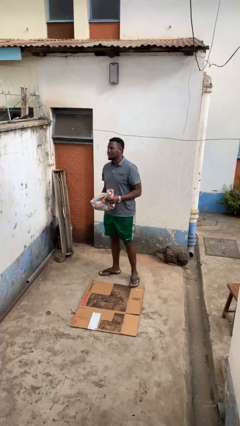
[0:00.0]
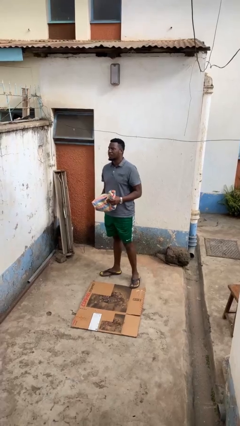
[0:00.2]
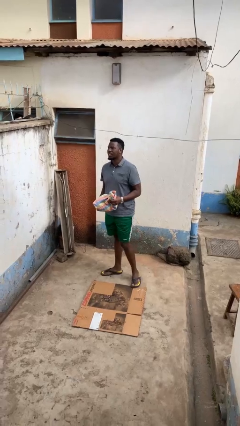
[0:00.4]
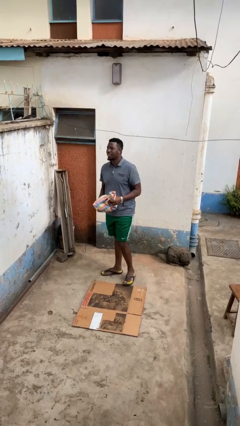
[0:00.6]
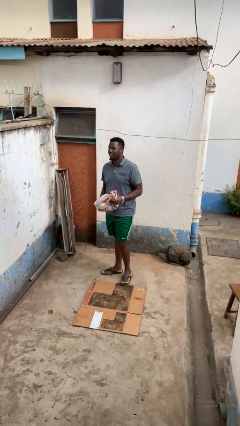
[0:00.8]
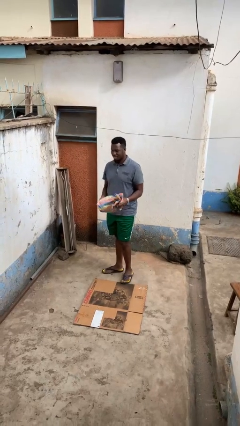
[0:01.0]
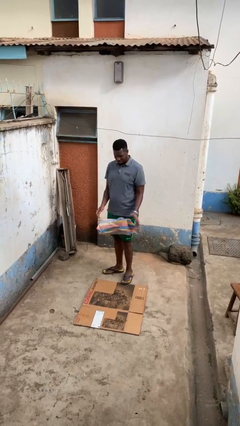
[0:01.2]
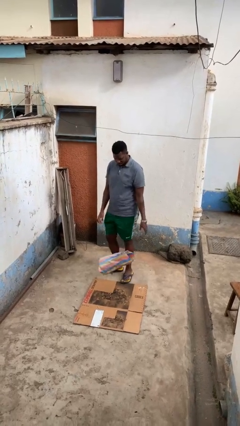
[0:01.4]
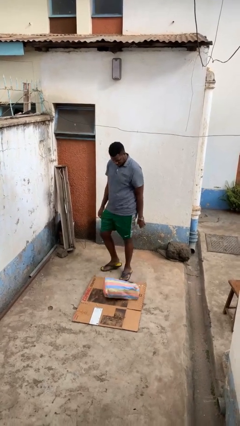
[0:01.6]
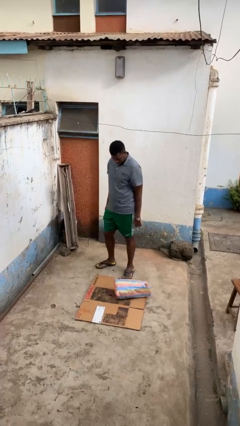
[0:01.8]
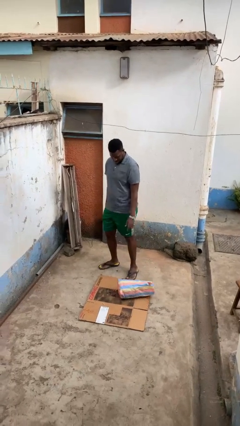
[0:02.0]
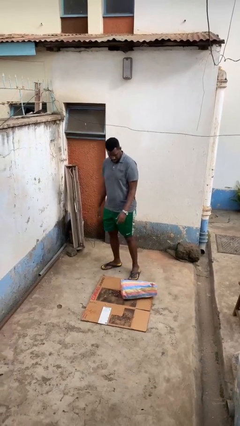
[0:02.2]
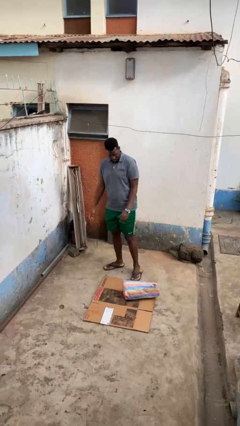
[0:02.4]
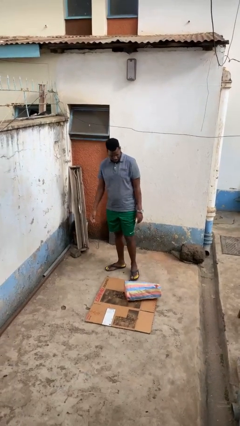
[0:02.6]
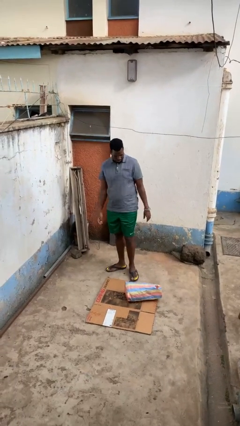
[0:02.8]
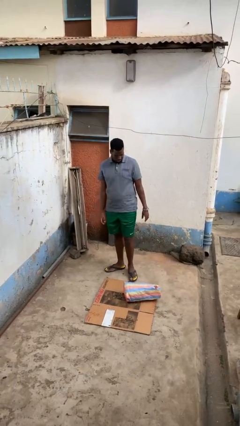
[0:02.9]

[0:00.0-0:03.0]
person drops object

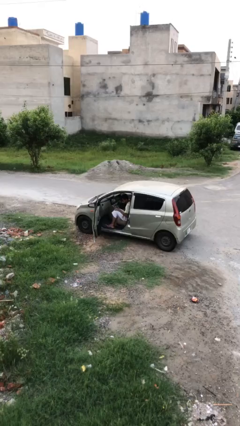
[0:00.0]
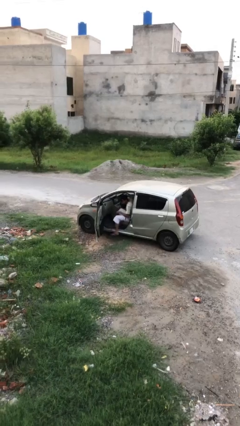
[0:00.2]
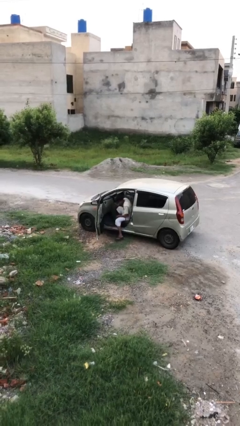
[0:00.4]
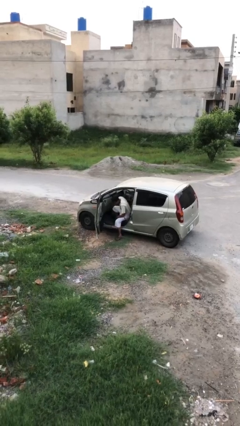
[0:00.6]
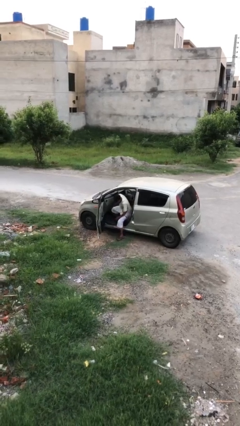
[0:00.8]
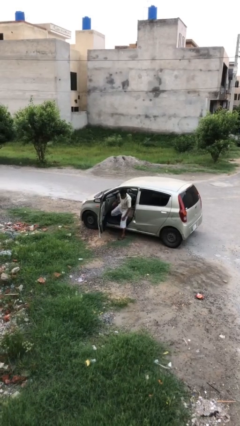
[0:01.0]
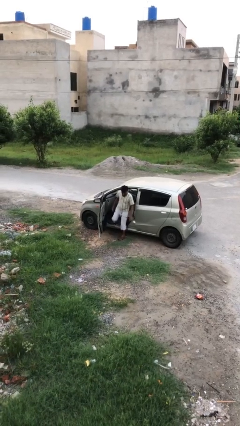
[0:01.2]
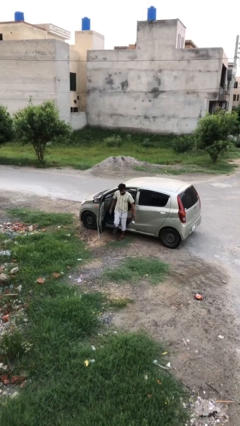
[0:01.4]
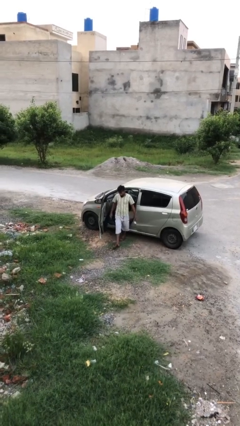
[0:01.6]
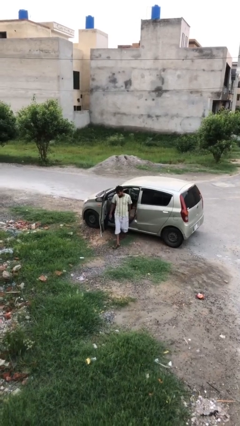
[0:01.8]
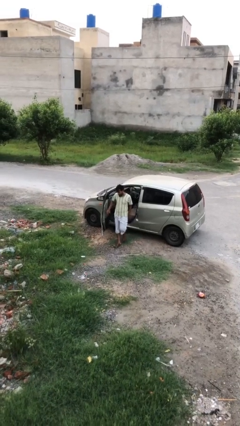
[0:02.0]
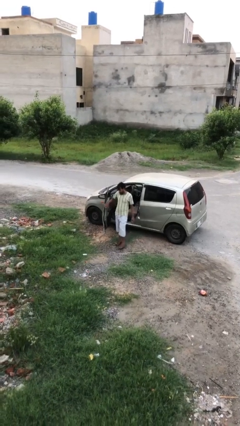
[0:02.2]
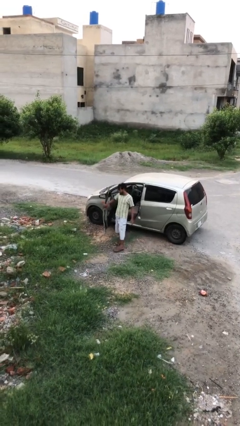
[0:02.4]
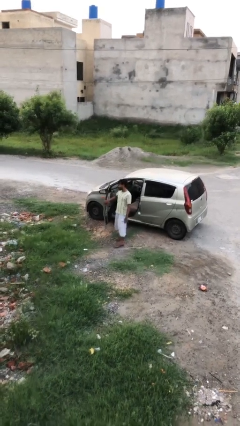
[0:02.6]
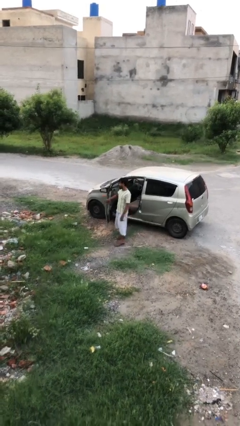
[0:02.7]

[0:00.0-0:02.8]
person exits car

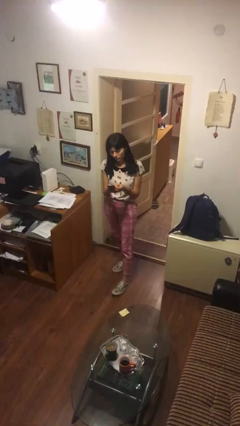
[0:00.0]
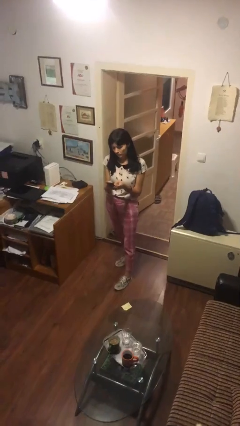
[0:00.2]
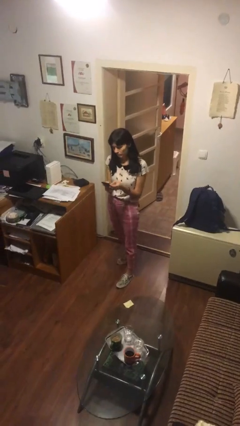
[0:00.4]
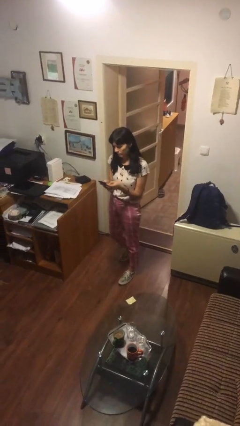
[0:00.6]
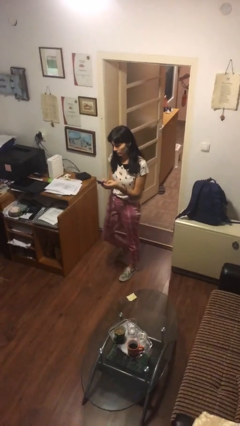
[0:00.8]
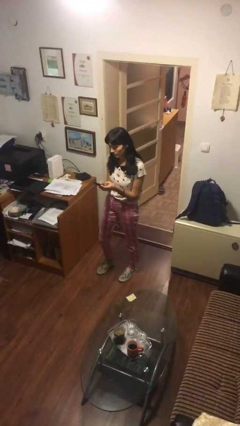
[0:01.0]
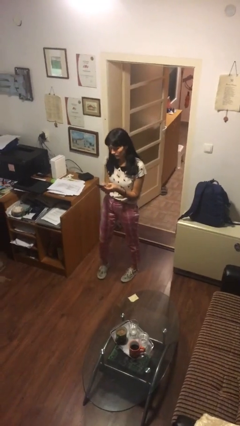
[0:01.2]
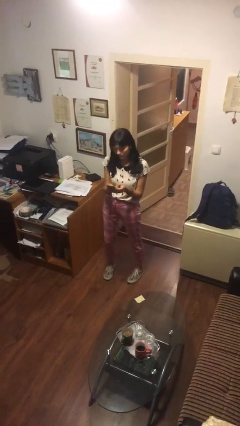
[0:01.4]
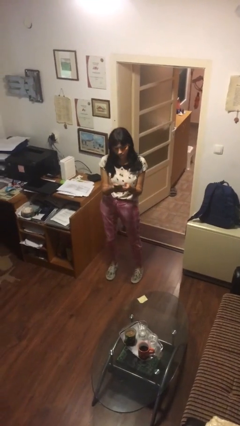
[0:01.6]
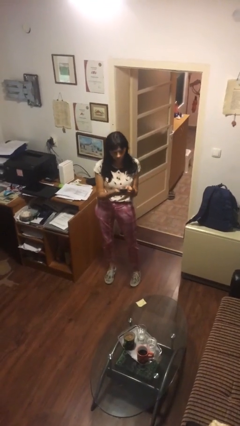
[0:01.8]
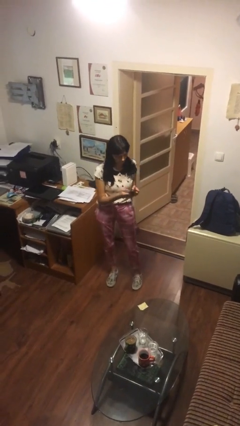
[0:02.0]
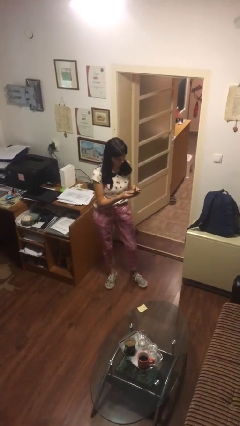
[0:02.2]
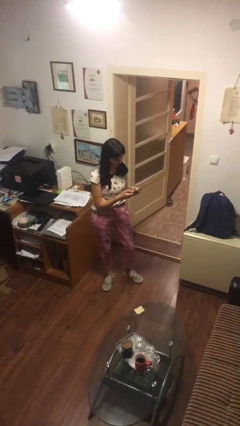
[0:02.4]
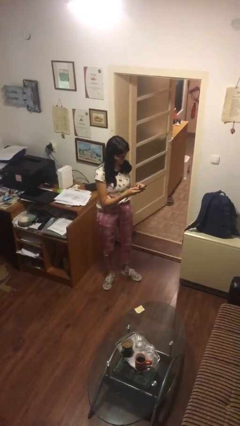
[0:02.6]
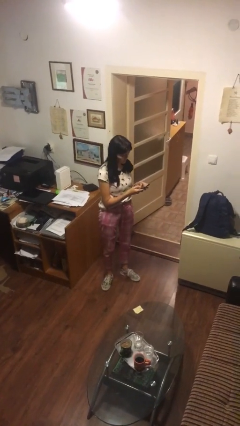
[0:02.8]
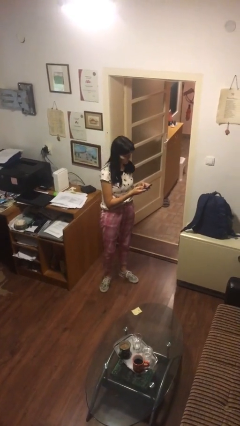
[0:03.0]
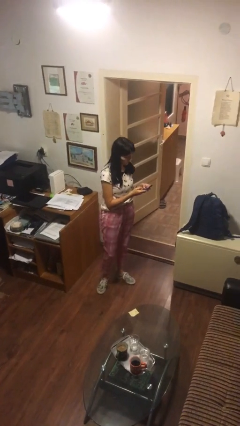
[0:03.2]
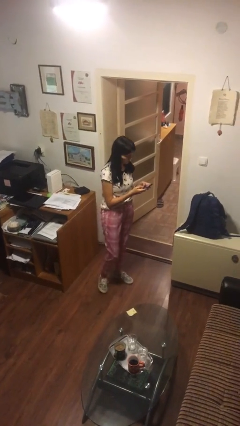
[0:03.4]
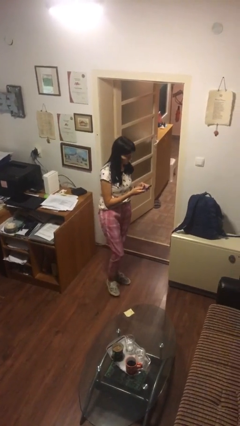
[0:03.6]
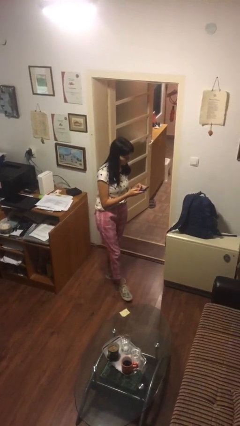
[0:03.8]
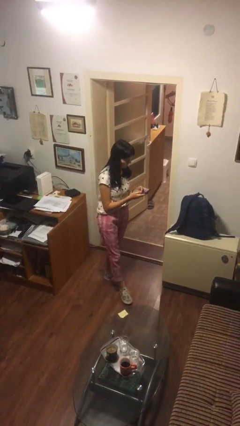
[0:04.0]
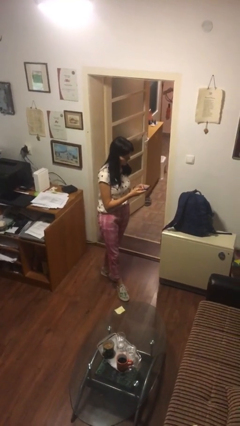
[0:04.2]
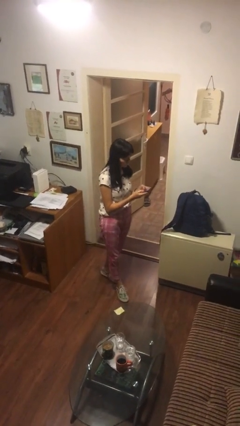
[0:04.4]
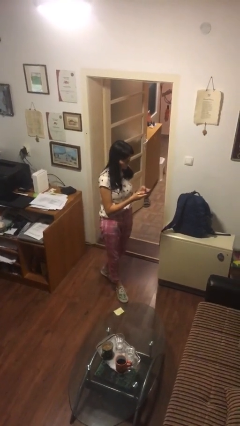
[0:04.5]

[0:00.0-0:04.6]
person texts on phone

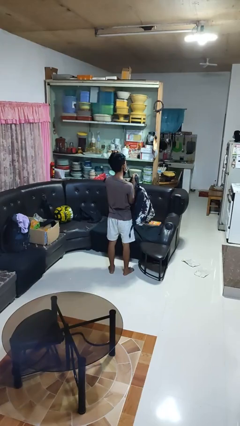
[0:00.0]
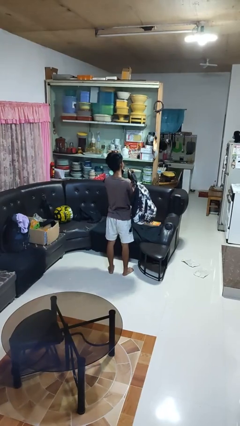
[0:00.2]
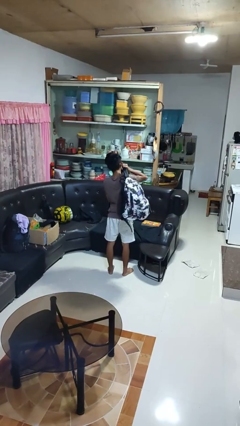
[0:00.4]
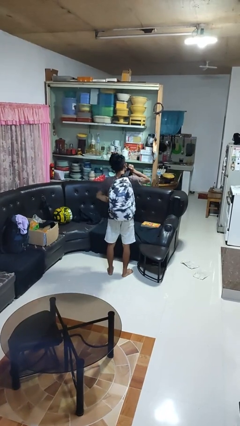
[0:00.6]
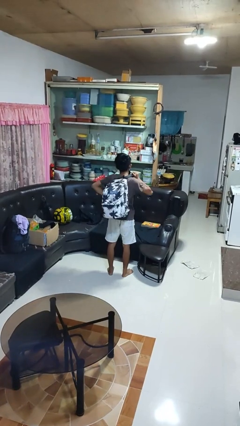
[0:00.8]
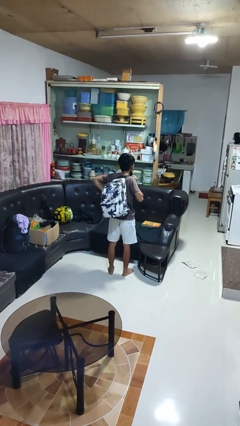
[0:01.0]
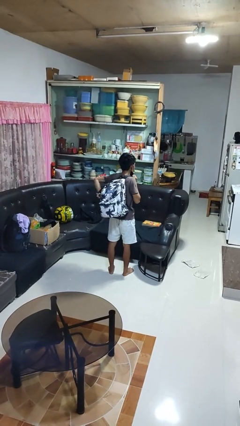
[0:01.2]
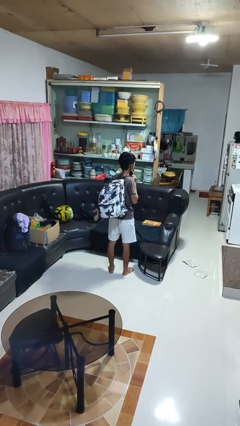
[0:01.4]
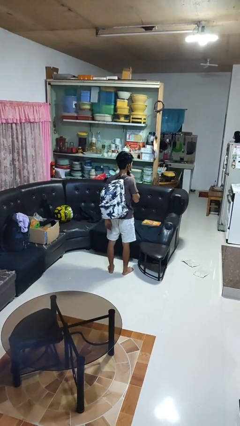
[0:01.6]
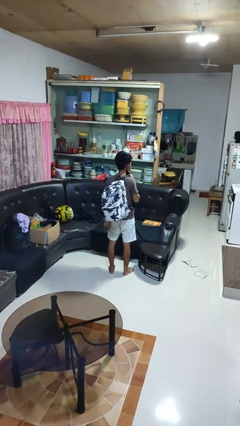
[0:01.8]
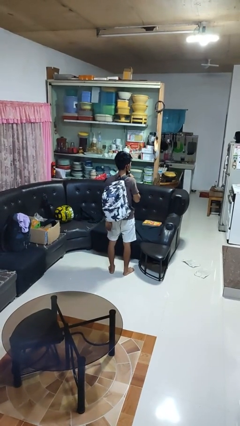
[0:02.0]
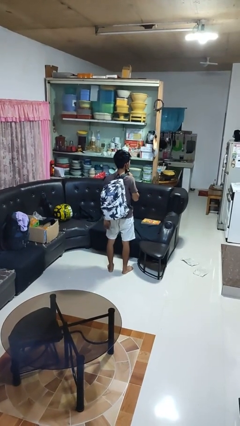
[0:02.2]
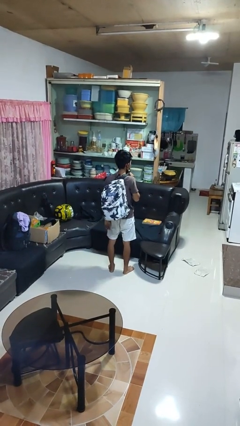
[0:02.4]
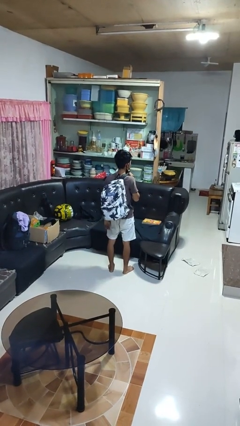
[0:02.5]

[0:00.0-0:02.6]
person puts on backpack

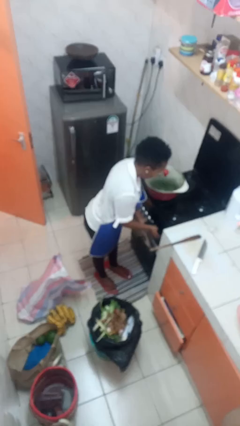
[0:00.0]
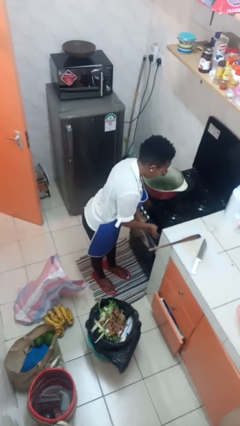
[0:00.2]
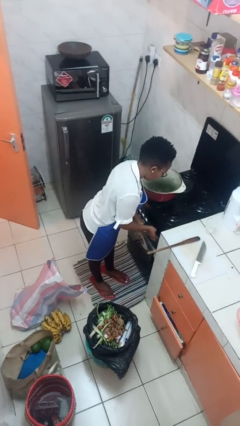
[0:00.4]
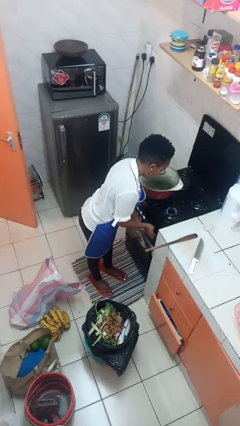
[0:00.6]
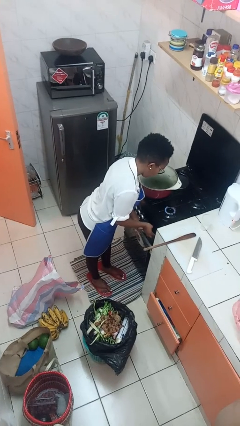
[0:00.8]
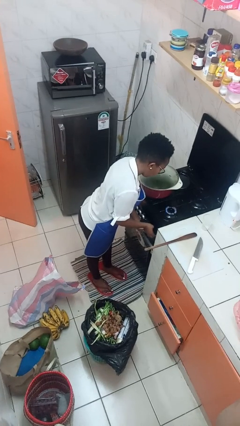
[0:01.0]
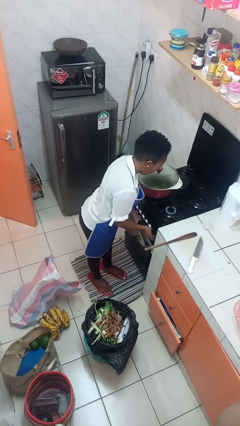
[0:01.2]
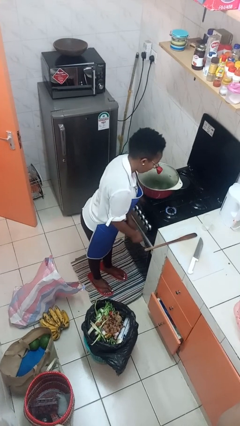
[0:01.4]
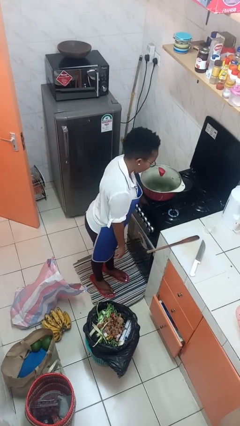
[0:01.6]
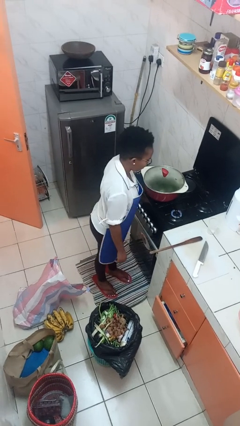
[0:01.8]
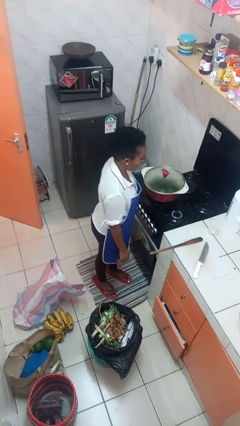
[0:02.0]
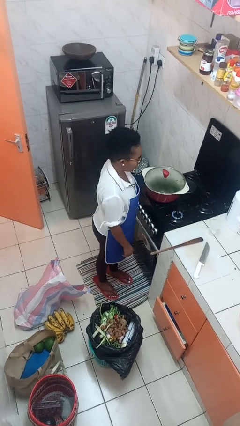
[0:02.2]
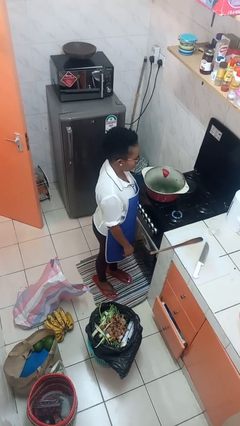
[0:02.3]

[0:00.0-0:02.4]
person turns on stovetop

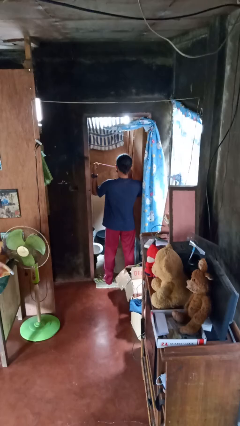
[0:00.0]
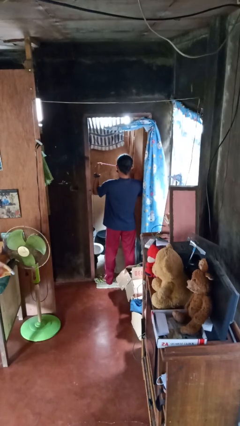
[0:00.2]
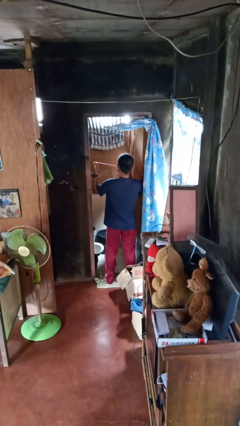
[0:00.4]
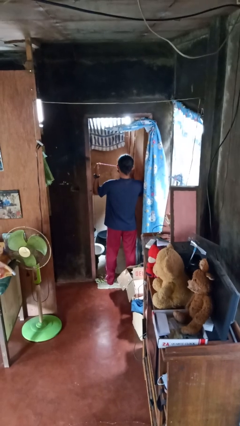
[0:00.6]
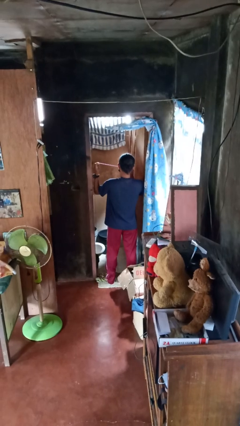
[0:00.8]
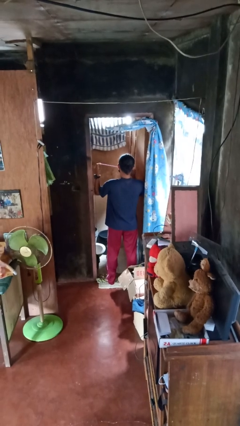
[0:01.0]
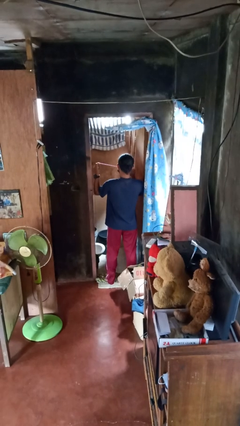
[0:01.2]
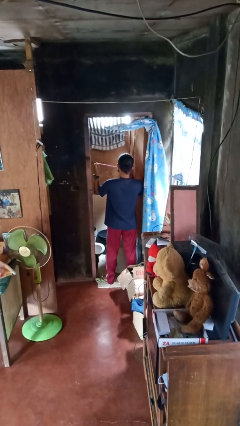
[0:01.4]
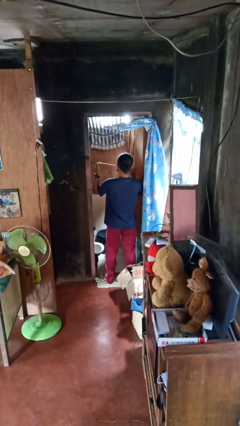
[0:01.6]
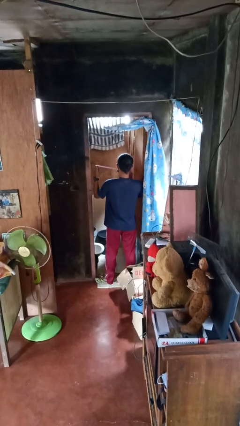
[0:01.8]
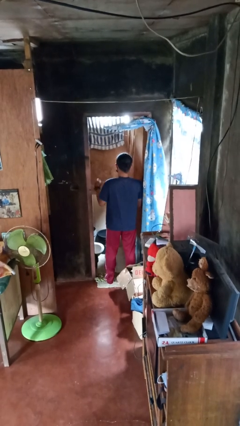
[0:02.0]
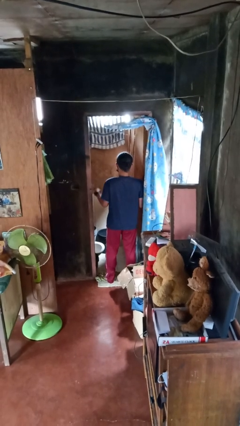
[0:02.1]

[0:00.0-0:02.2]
person flosses

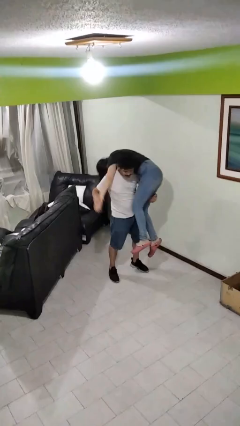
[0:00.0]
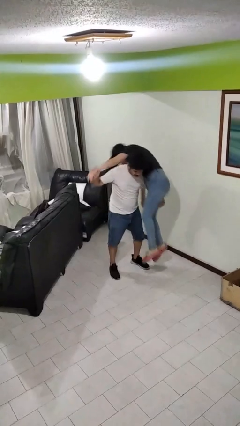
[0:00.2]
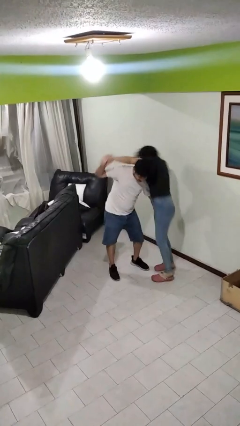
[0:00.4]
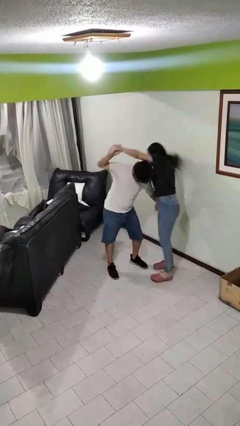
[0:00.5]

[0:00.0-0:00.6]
person puts down person
